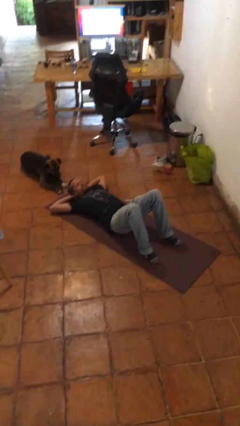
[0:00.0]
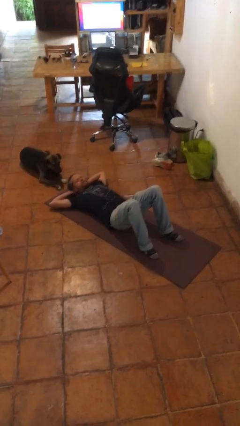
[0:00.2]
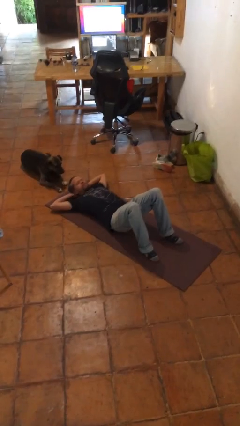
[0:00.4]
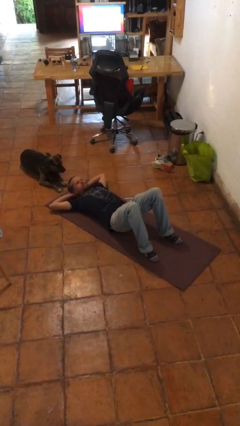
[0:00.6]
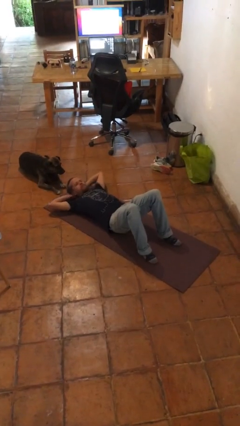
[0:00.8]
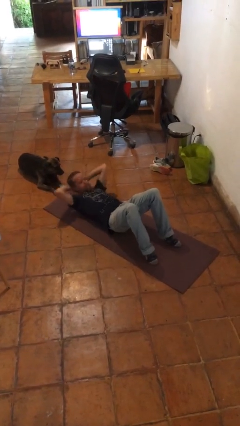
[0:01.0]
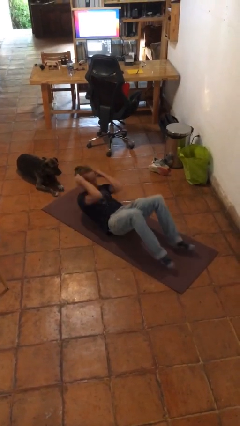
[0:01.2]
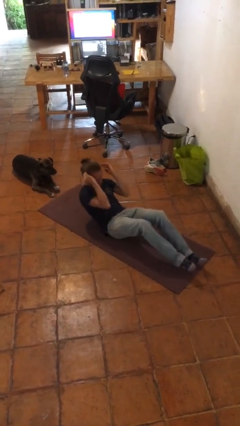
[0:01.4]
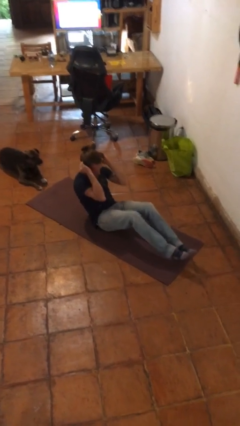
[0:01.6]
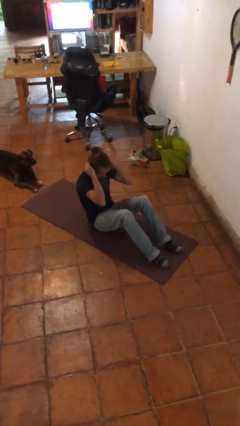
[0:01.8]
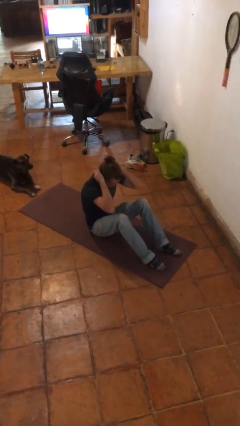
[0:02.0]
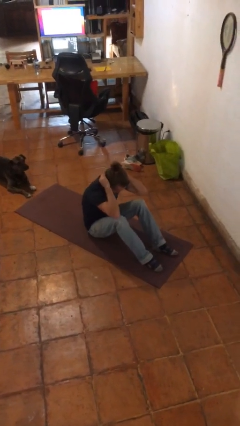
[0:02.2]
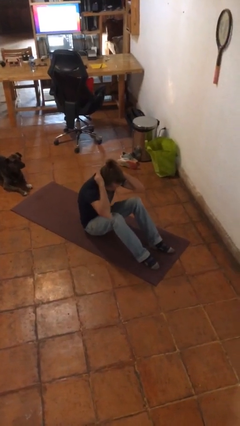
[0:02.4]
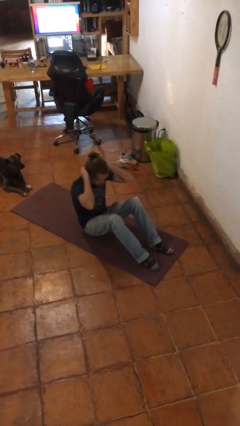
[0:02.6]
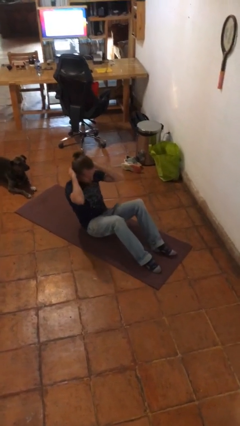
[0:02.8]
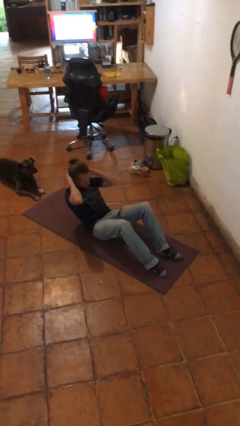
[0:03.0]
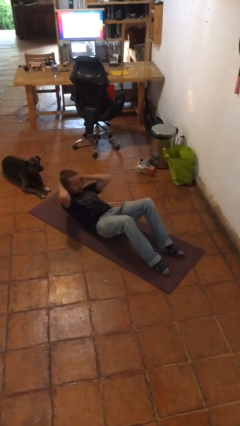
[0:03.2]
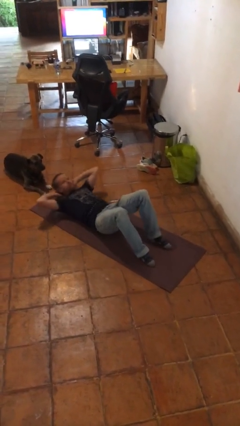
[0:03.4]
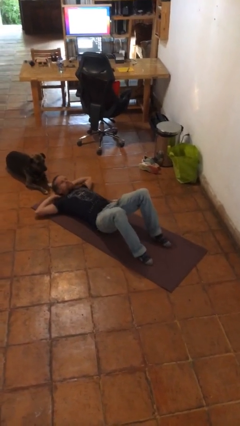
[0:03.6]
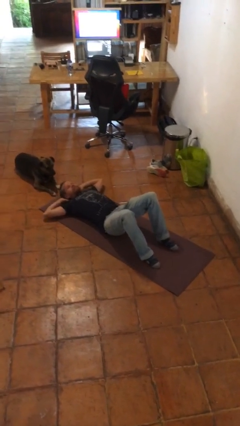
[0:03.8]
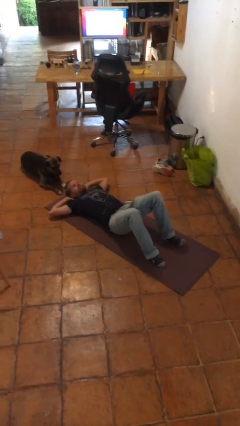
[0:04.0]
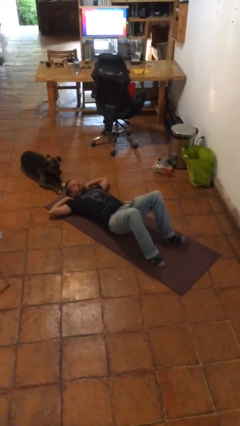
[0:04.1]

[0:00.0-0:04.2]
person exercises with situp

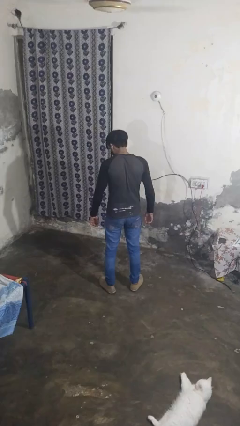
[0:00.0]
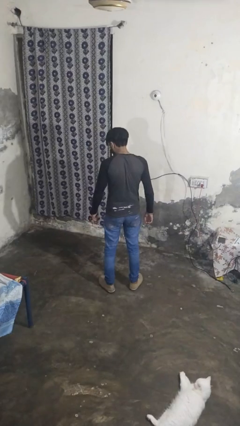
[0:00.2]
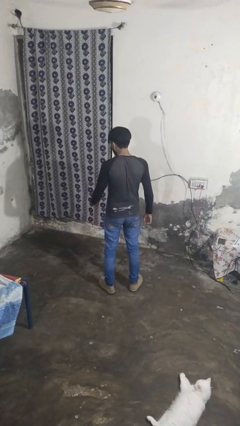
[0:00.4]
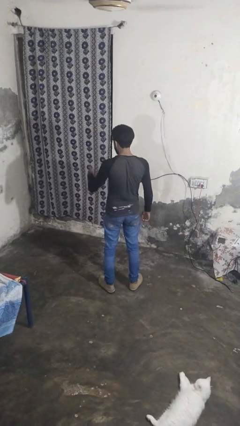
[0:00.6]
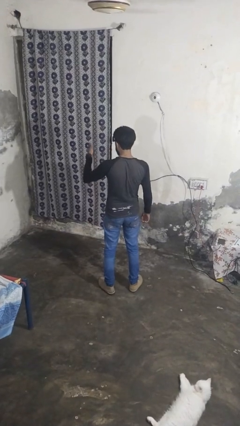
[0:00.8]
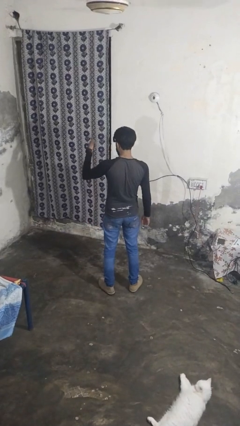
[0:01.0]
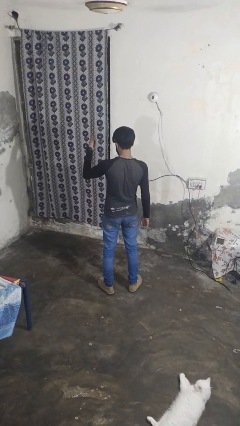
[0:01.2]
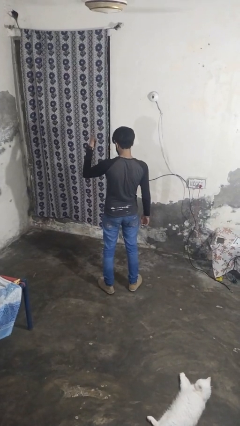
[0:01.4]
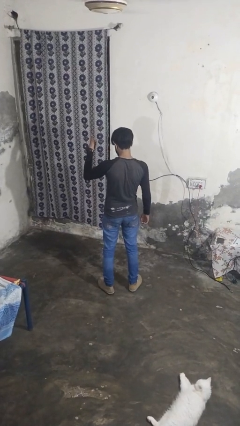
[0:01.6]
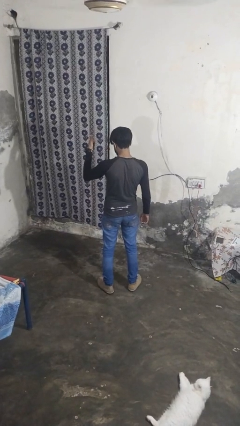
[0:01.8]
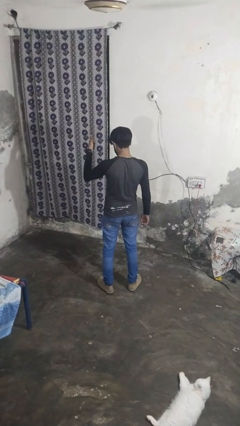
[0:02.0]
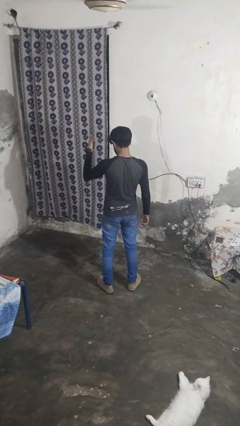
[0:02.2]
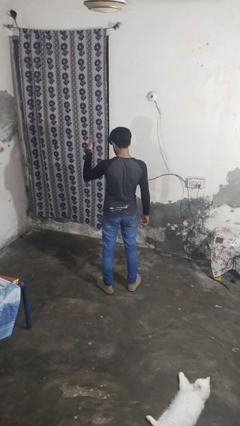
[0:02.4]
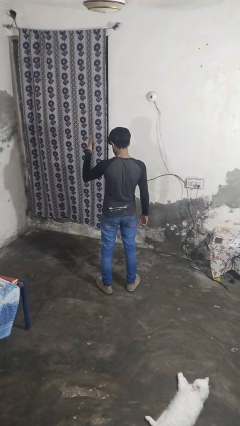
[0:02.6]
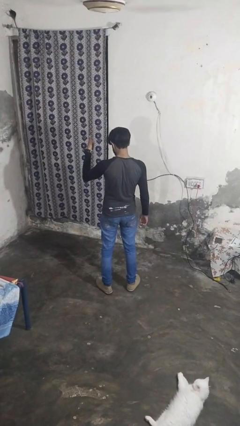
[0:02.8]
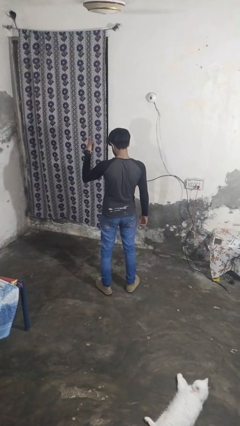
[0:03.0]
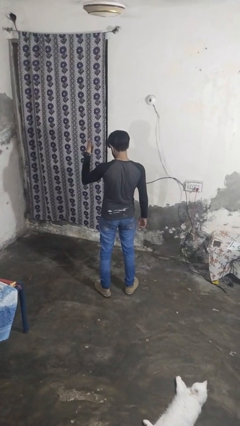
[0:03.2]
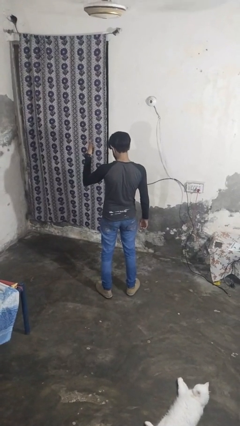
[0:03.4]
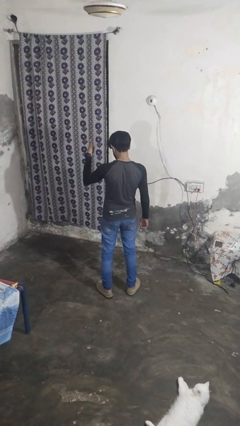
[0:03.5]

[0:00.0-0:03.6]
person gestures thumbs up

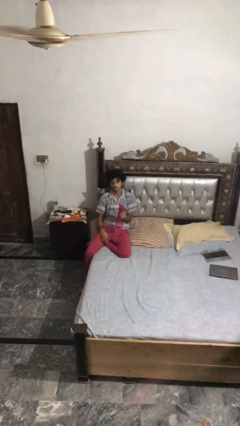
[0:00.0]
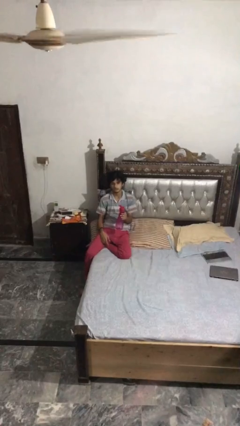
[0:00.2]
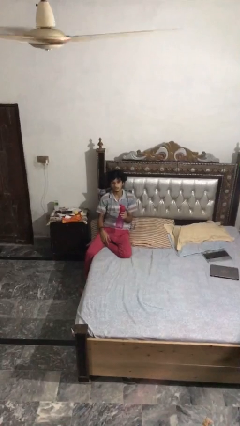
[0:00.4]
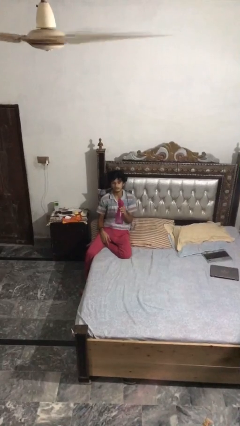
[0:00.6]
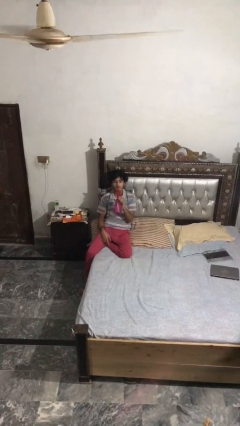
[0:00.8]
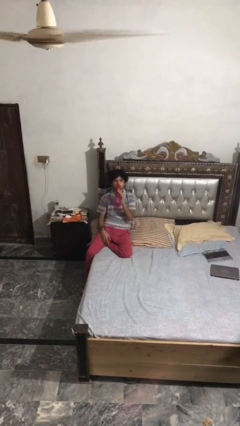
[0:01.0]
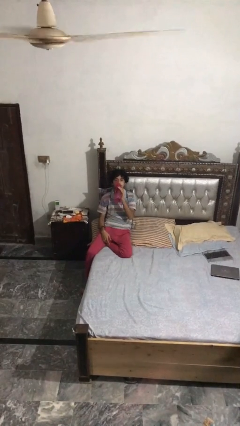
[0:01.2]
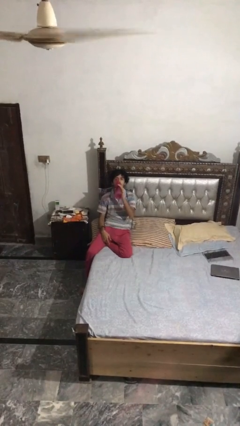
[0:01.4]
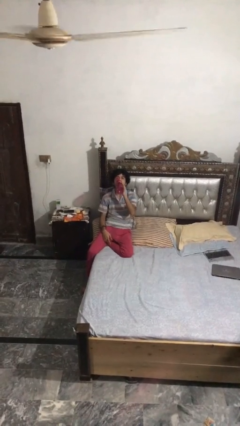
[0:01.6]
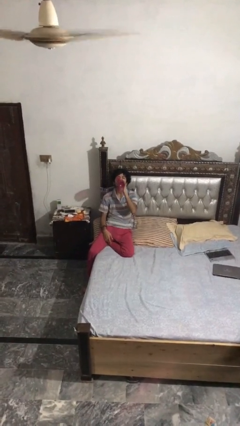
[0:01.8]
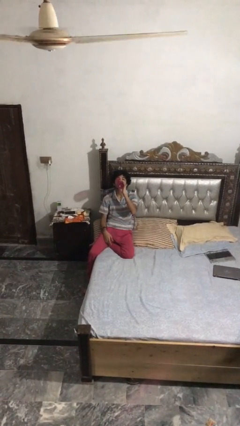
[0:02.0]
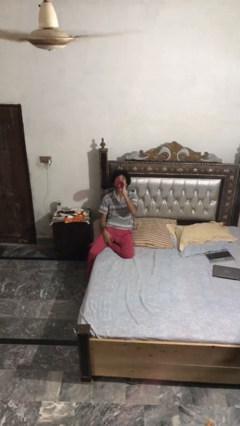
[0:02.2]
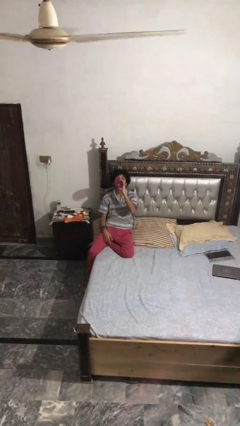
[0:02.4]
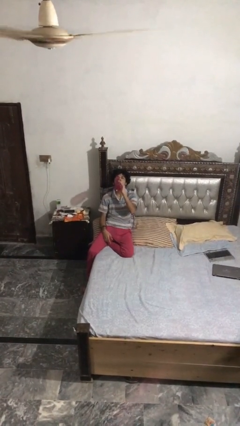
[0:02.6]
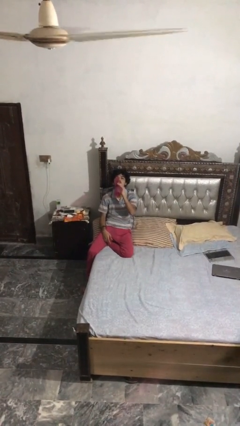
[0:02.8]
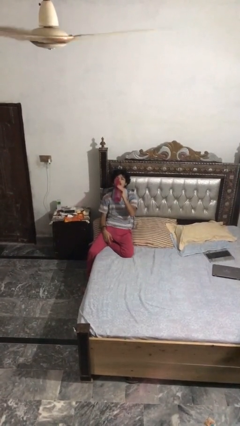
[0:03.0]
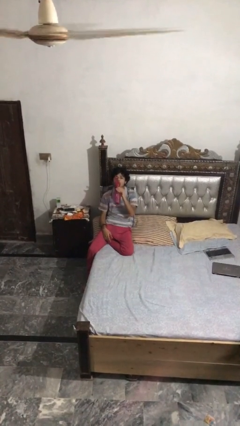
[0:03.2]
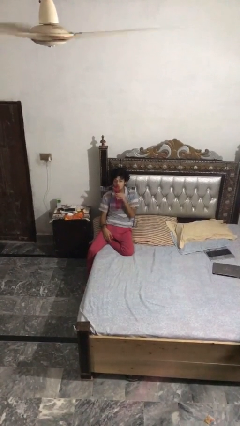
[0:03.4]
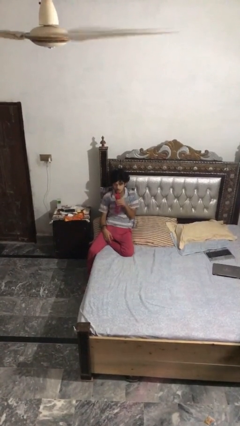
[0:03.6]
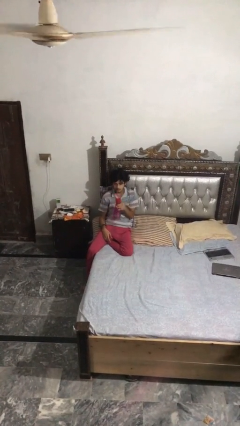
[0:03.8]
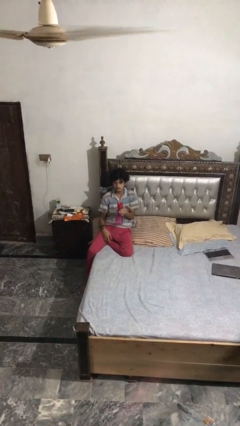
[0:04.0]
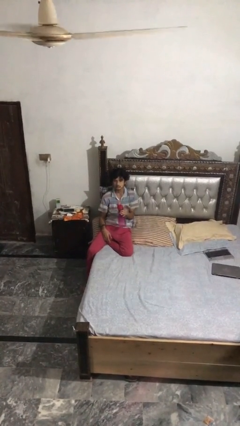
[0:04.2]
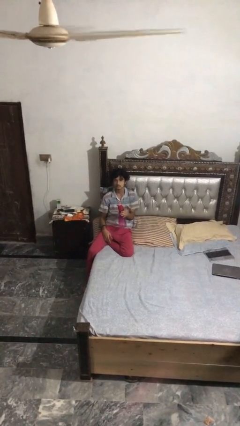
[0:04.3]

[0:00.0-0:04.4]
person drinks from bottle

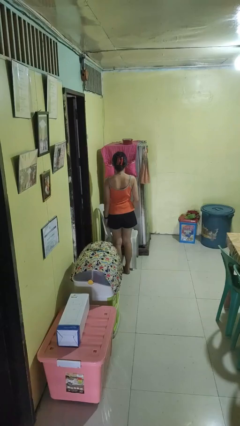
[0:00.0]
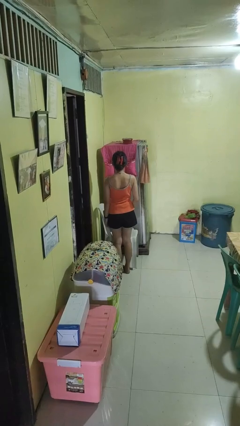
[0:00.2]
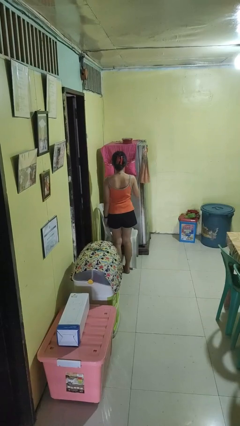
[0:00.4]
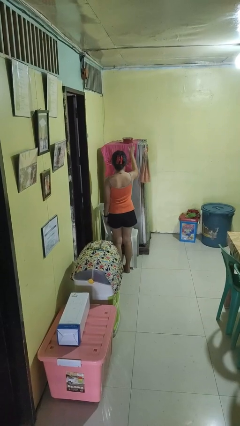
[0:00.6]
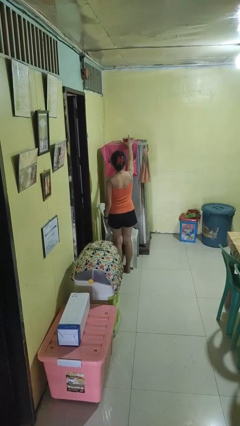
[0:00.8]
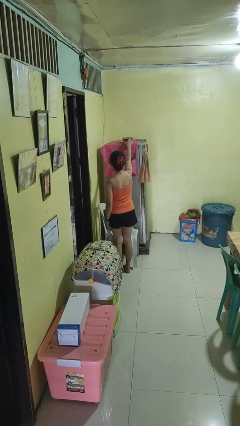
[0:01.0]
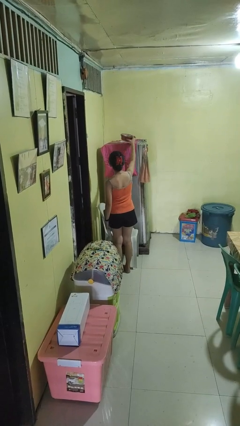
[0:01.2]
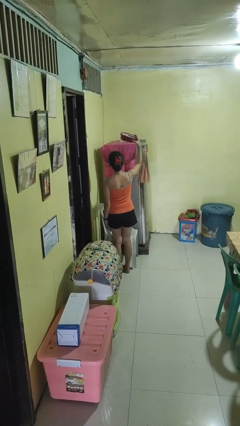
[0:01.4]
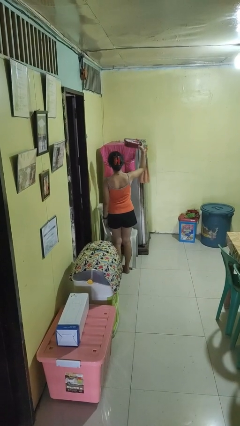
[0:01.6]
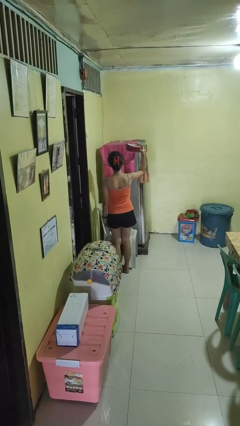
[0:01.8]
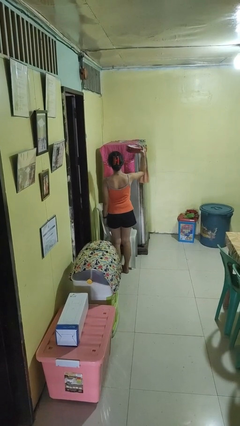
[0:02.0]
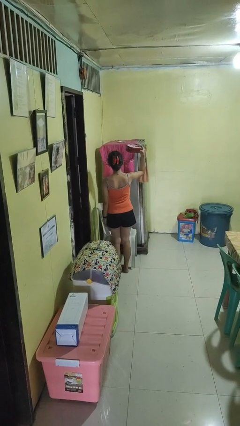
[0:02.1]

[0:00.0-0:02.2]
person picks up object from shelf

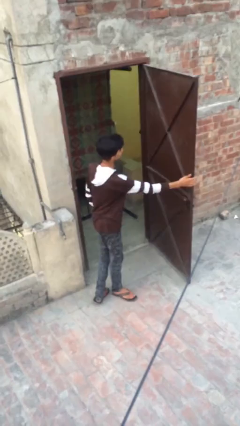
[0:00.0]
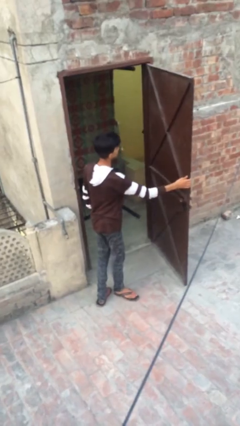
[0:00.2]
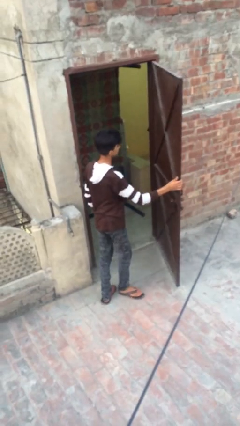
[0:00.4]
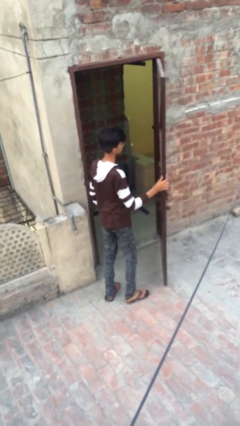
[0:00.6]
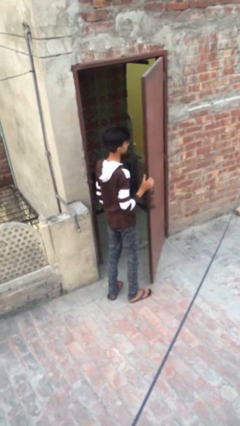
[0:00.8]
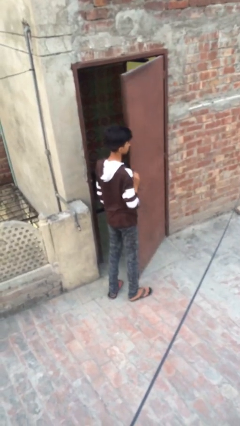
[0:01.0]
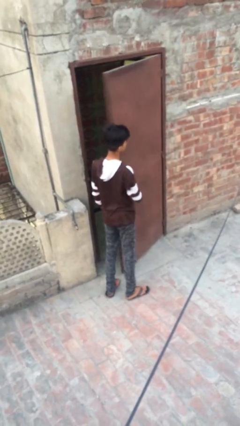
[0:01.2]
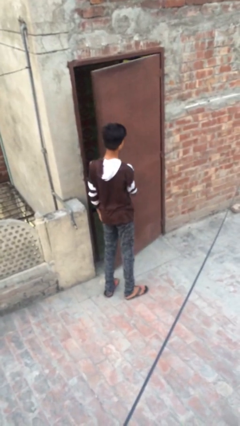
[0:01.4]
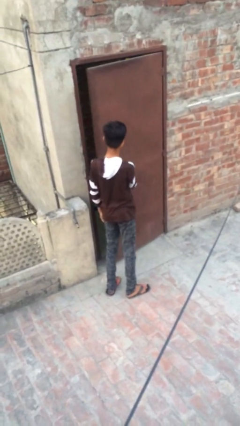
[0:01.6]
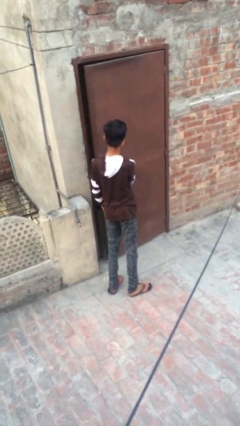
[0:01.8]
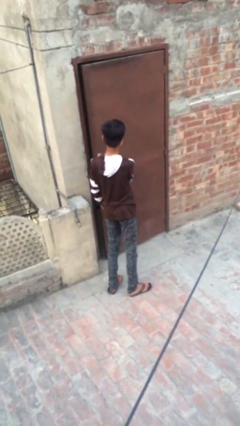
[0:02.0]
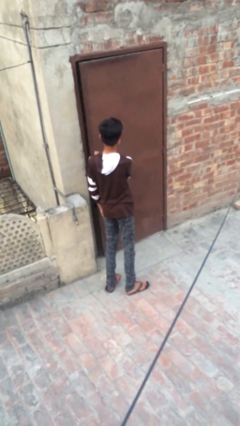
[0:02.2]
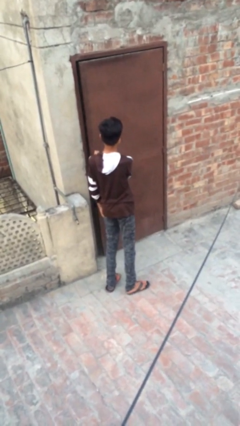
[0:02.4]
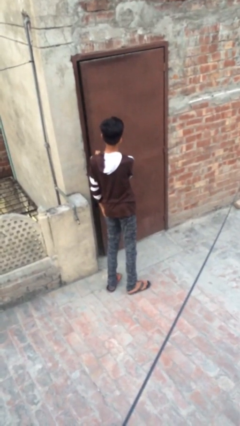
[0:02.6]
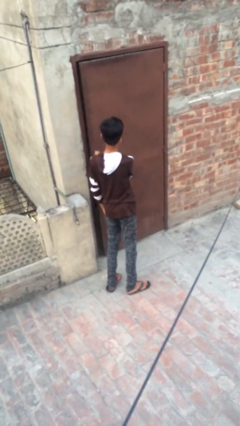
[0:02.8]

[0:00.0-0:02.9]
person closes facility door

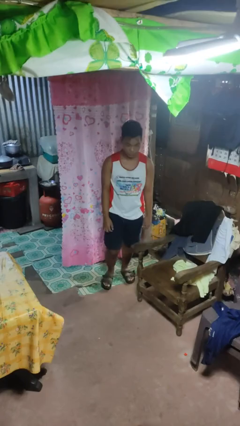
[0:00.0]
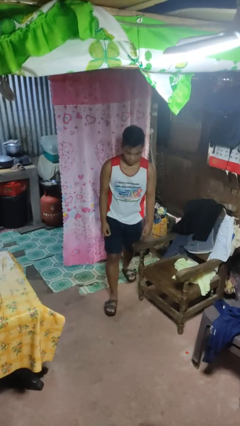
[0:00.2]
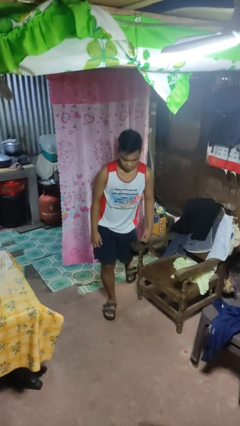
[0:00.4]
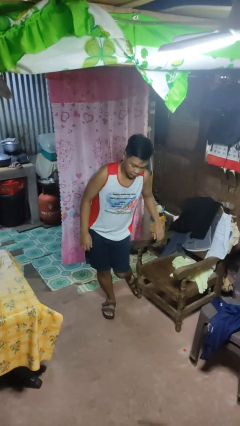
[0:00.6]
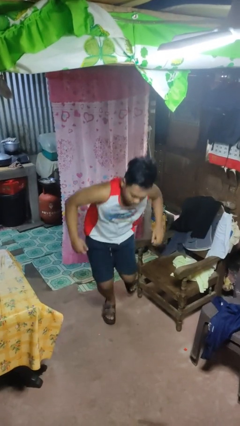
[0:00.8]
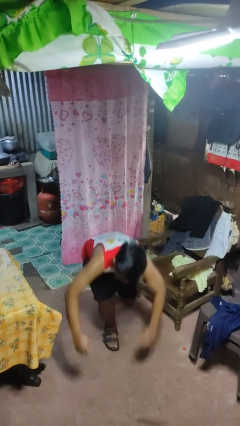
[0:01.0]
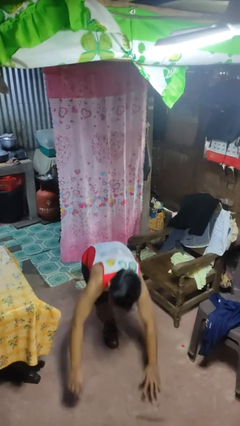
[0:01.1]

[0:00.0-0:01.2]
person trips on object on floor
